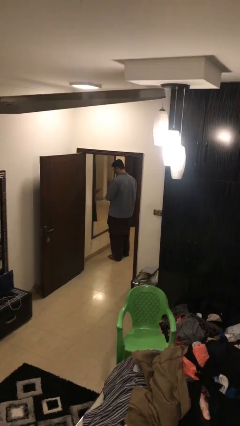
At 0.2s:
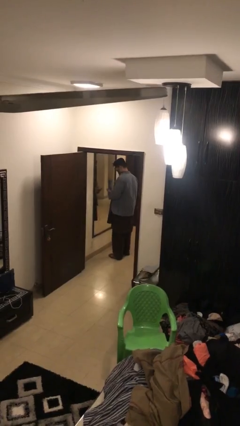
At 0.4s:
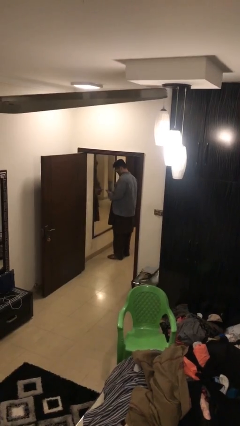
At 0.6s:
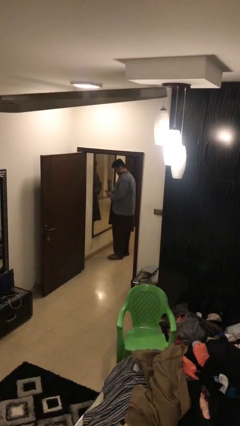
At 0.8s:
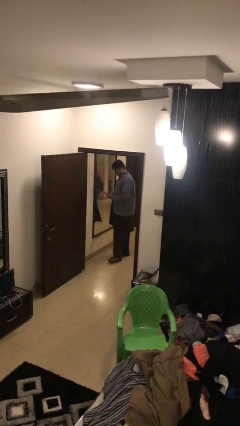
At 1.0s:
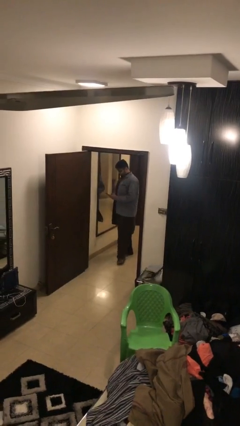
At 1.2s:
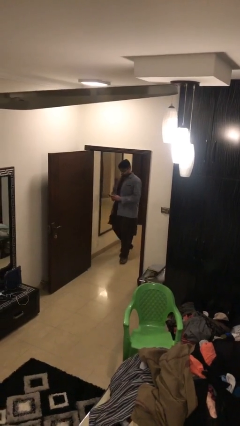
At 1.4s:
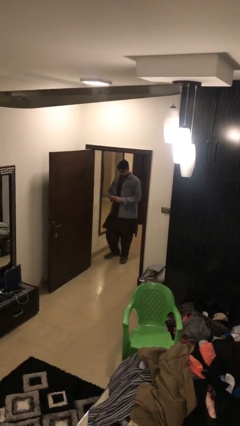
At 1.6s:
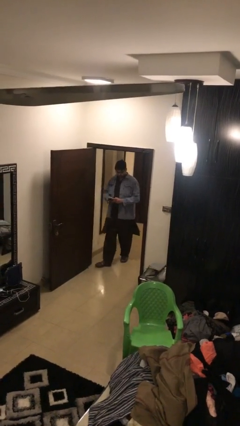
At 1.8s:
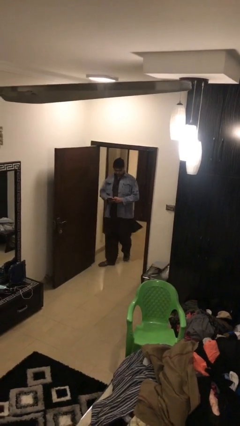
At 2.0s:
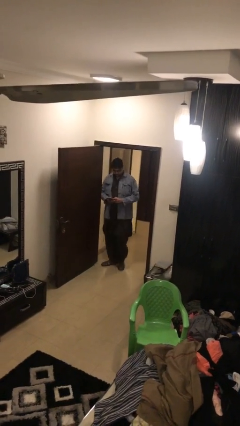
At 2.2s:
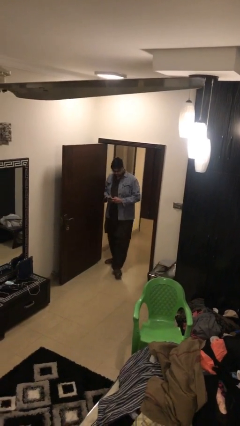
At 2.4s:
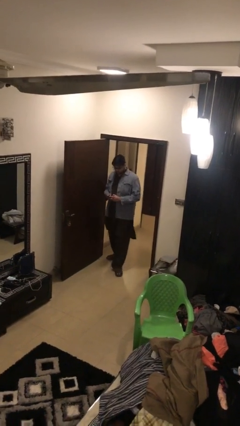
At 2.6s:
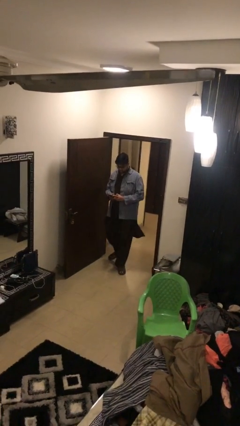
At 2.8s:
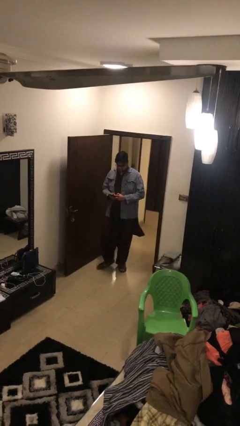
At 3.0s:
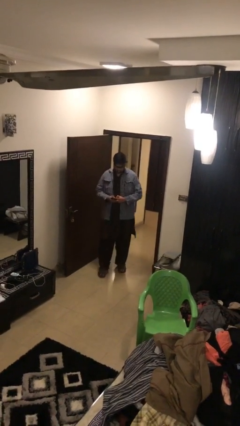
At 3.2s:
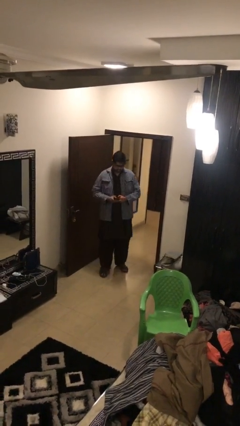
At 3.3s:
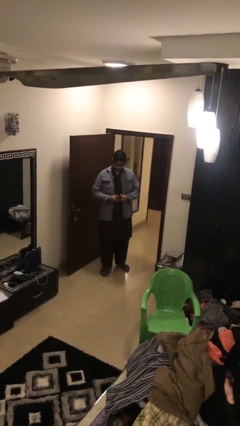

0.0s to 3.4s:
person enters scene through structure

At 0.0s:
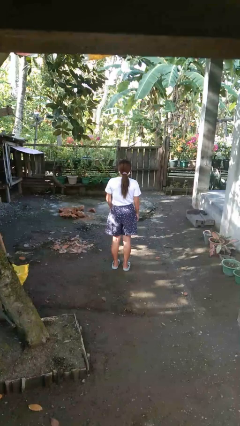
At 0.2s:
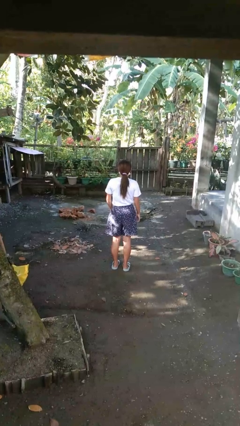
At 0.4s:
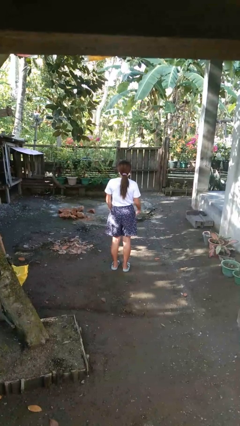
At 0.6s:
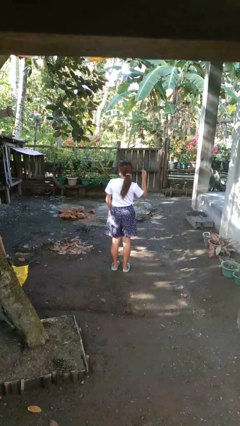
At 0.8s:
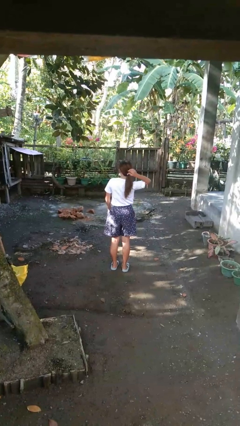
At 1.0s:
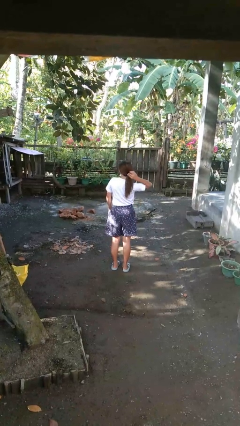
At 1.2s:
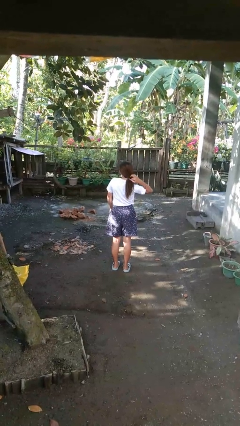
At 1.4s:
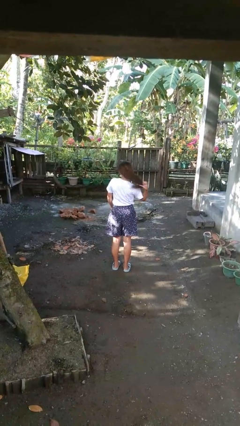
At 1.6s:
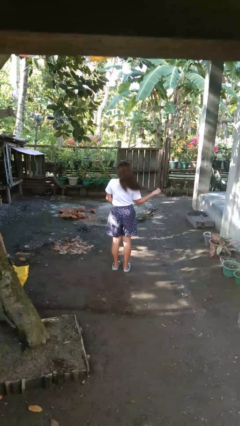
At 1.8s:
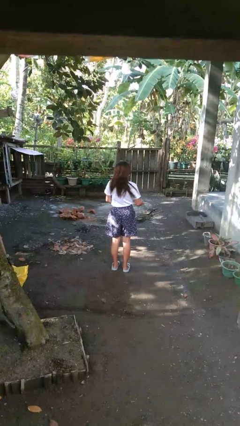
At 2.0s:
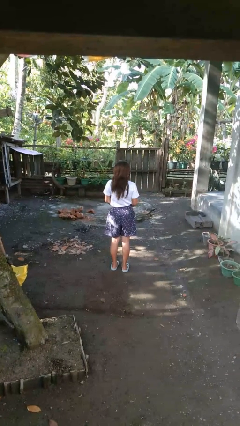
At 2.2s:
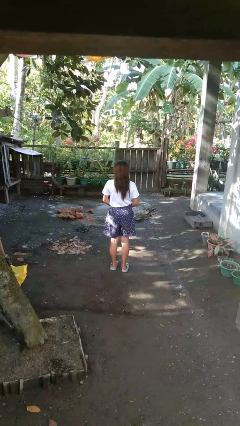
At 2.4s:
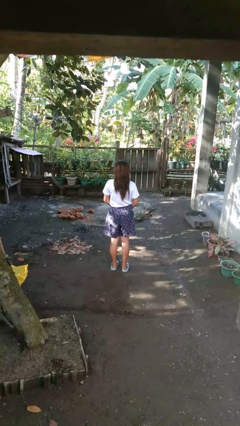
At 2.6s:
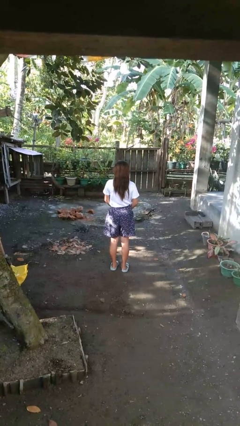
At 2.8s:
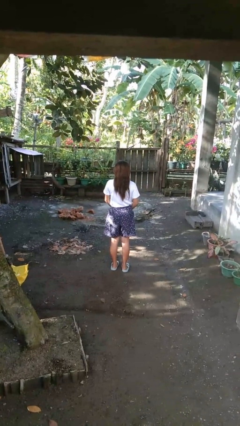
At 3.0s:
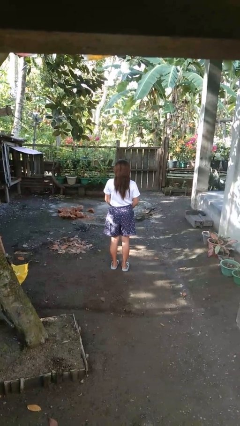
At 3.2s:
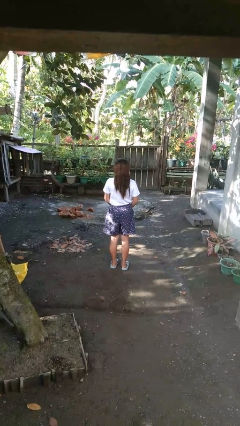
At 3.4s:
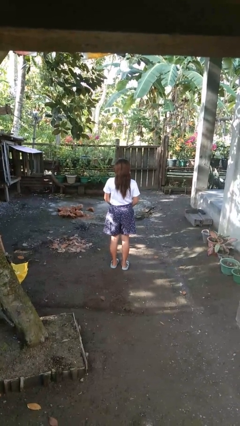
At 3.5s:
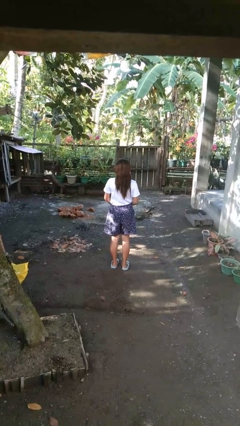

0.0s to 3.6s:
person takes off hairtie

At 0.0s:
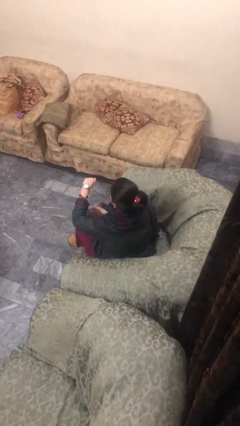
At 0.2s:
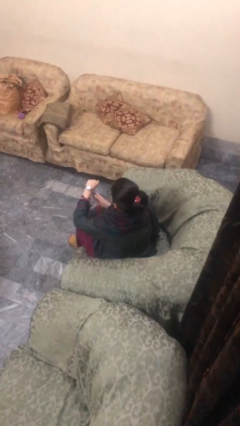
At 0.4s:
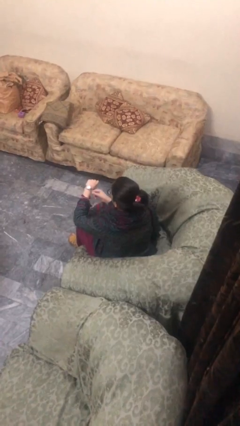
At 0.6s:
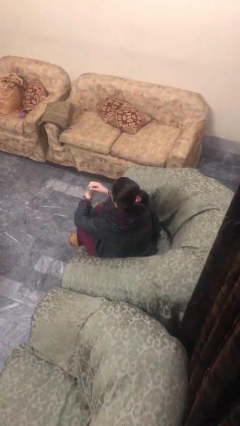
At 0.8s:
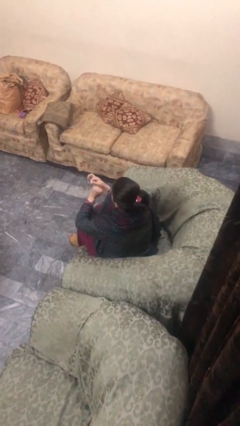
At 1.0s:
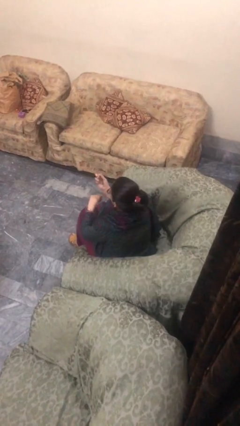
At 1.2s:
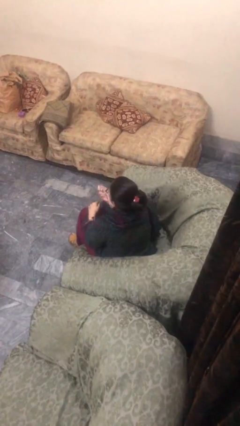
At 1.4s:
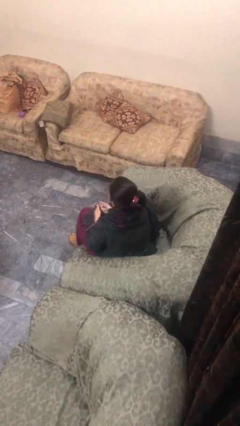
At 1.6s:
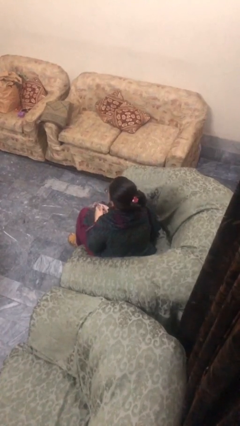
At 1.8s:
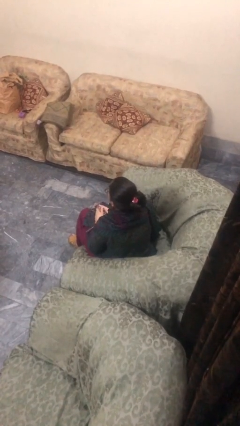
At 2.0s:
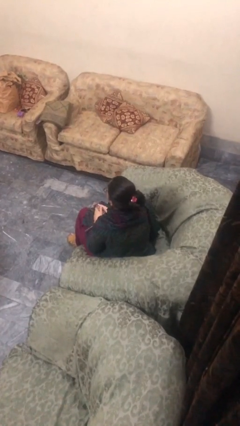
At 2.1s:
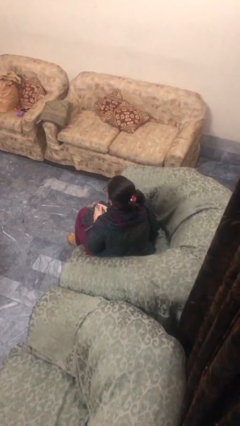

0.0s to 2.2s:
person takes off wristwatch

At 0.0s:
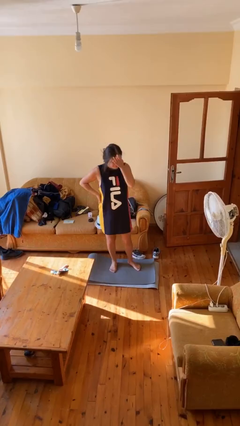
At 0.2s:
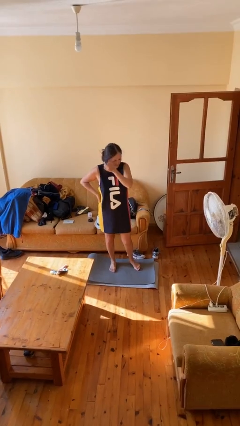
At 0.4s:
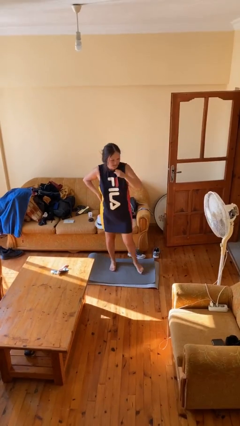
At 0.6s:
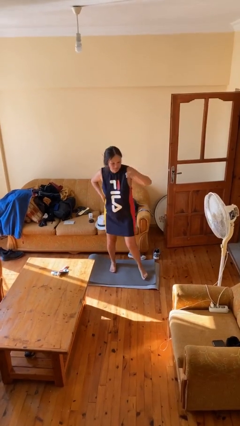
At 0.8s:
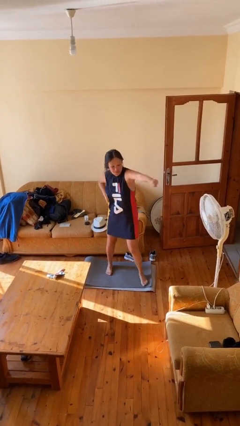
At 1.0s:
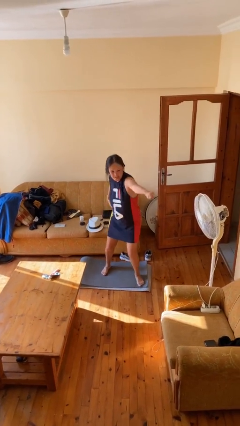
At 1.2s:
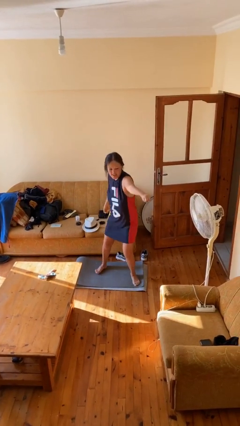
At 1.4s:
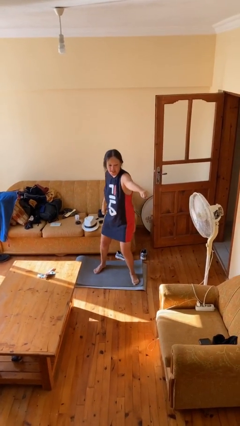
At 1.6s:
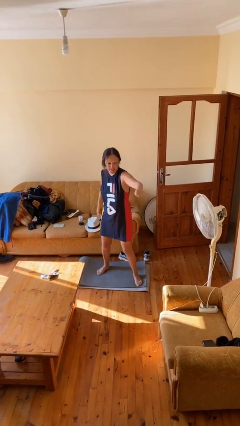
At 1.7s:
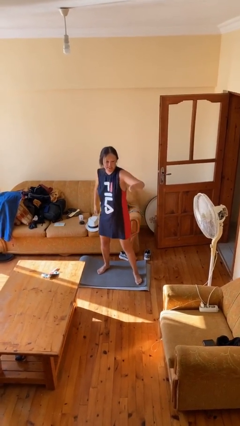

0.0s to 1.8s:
person punches

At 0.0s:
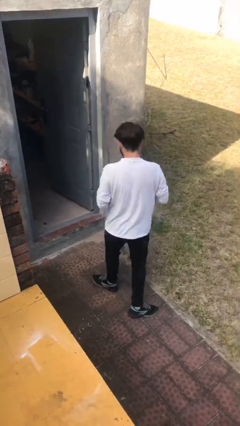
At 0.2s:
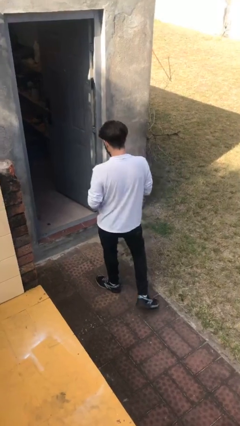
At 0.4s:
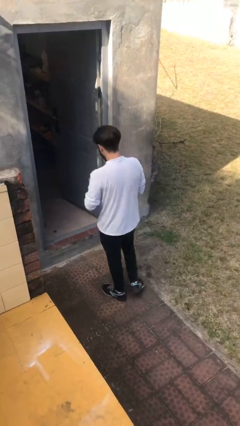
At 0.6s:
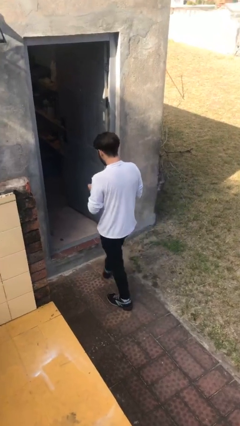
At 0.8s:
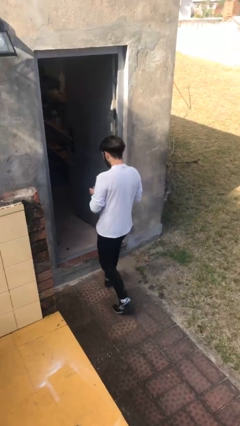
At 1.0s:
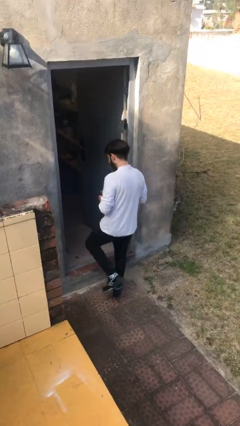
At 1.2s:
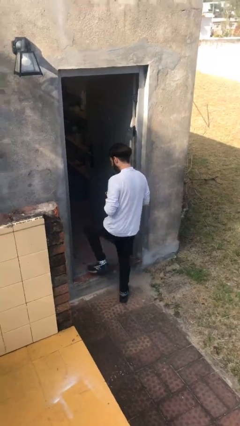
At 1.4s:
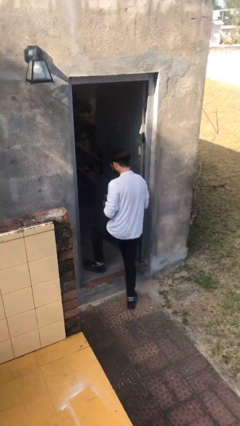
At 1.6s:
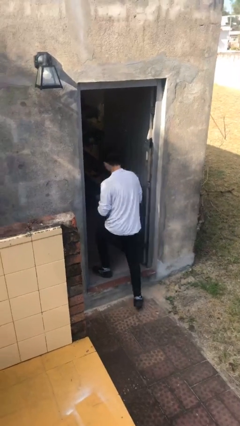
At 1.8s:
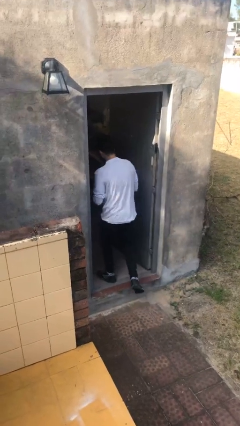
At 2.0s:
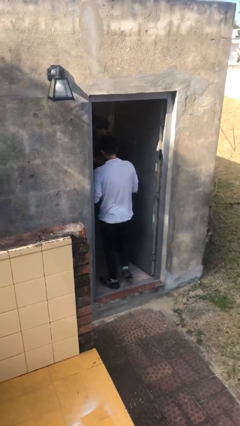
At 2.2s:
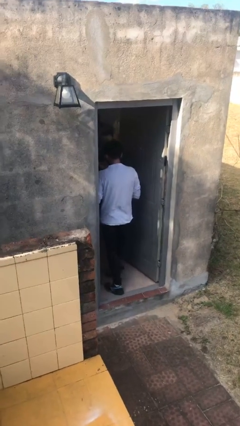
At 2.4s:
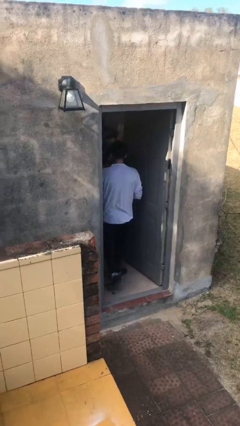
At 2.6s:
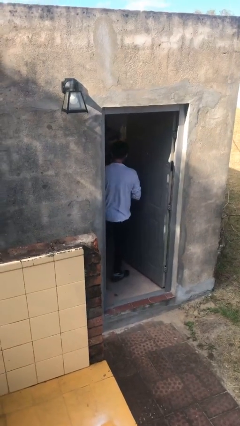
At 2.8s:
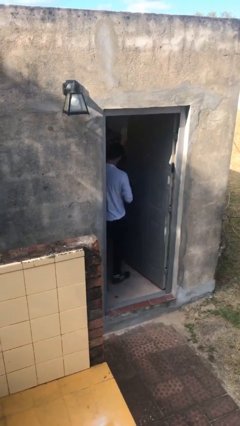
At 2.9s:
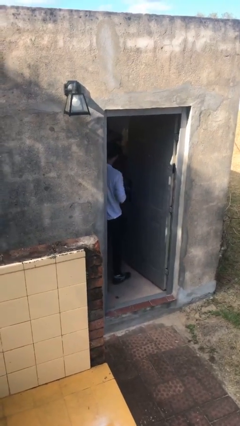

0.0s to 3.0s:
person exits scene through structure

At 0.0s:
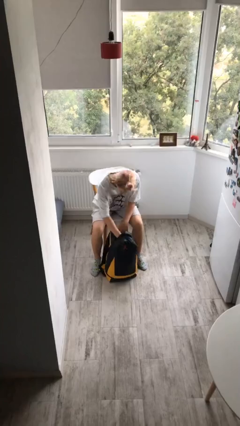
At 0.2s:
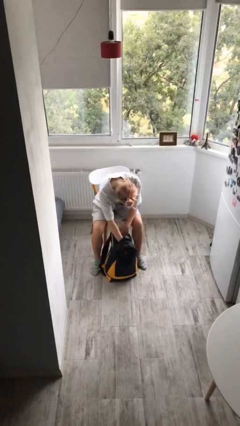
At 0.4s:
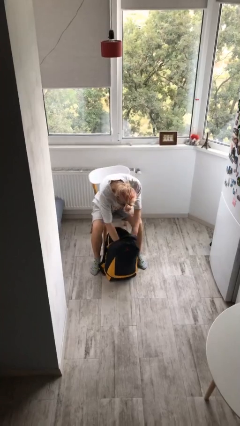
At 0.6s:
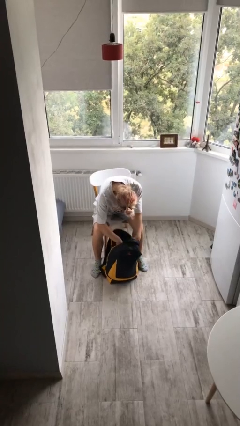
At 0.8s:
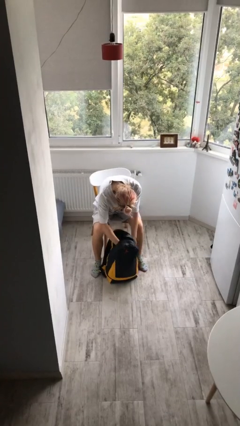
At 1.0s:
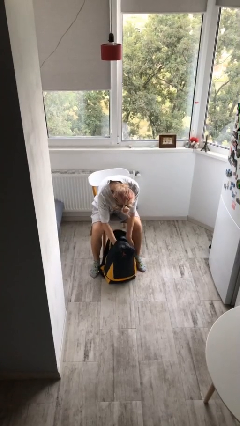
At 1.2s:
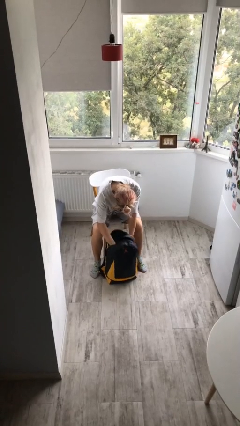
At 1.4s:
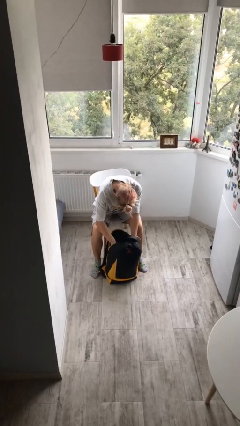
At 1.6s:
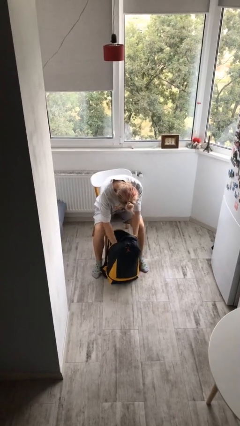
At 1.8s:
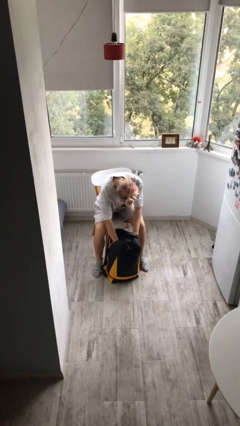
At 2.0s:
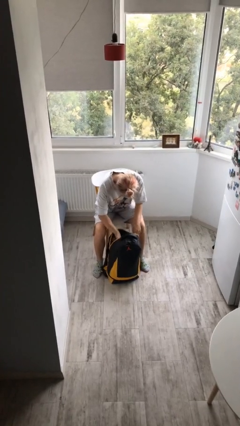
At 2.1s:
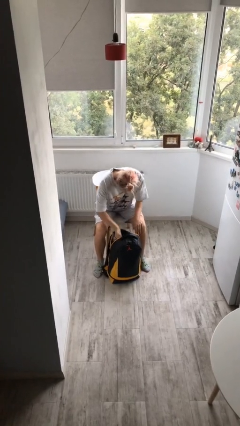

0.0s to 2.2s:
person searches in backpack

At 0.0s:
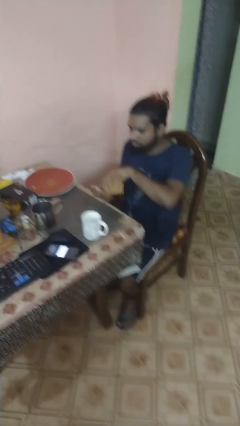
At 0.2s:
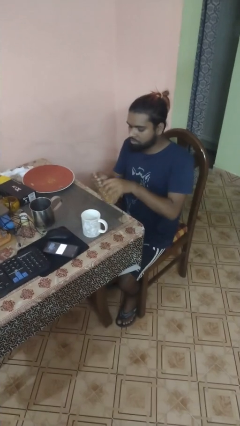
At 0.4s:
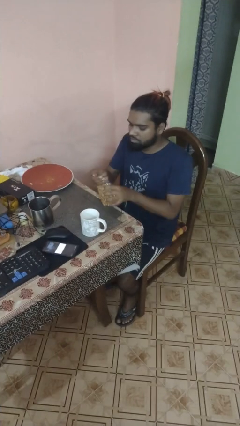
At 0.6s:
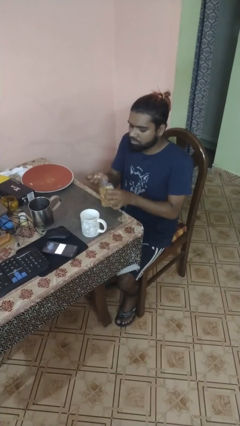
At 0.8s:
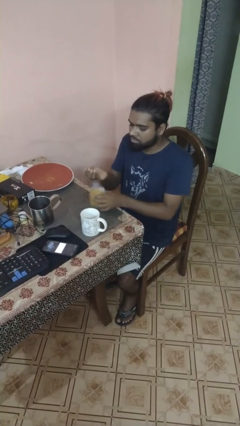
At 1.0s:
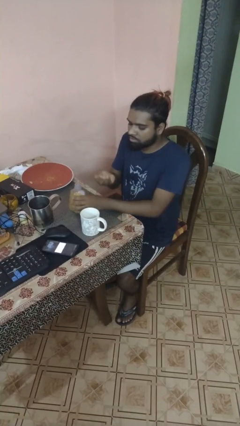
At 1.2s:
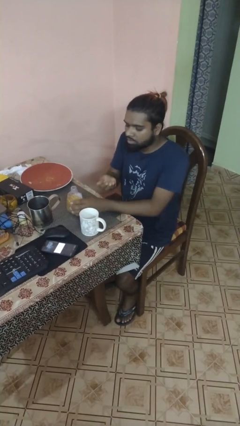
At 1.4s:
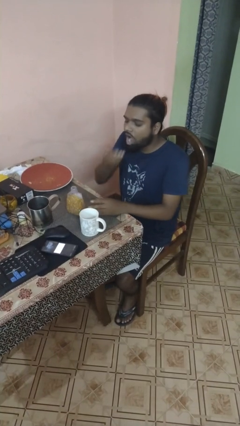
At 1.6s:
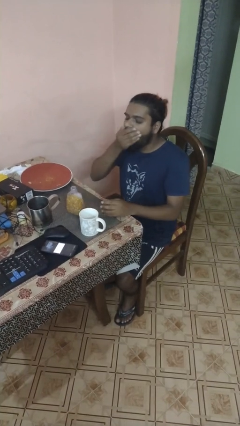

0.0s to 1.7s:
person takes medicine pills
